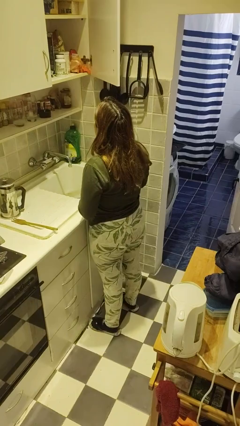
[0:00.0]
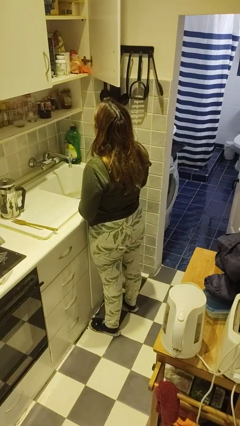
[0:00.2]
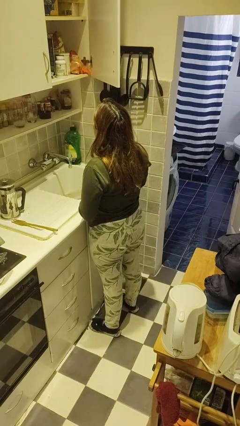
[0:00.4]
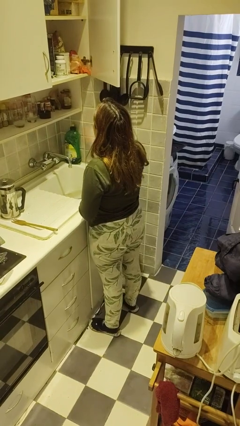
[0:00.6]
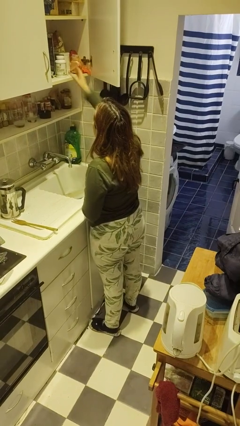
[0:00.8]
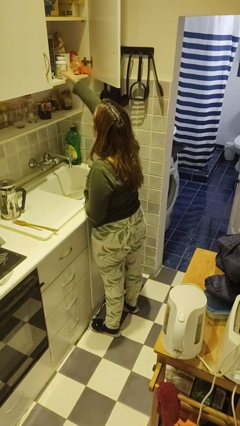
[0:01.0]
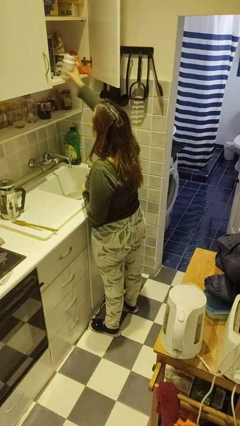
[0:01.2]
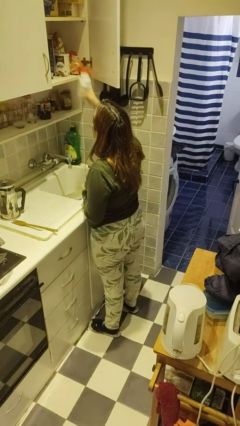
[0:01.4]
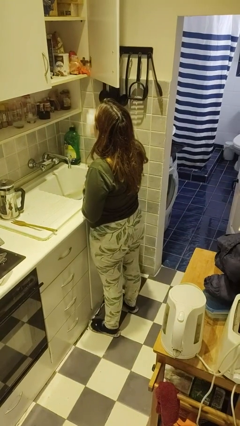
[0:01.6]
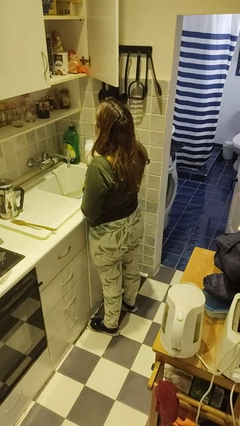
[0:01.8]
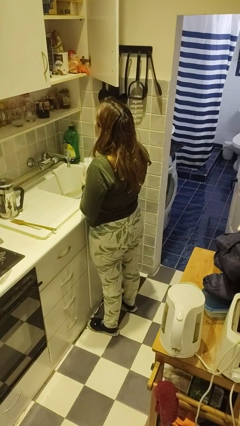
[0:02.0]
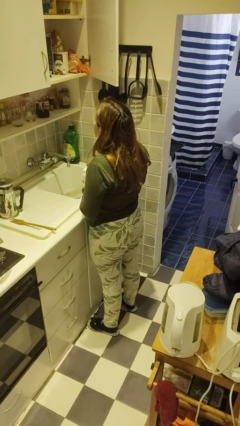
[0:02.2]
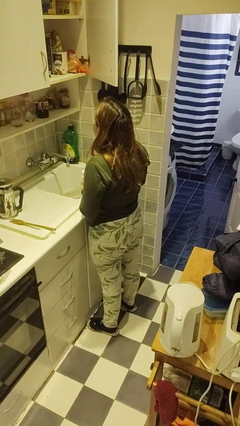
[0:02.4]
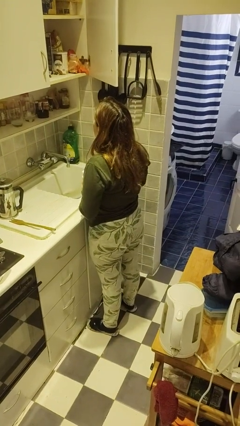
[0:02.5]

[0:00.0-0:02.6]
person takes object from cabinet

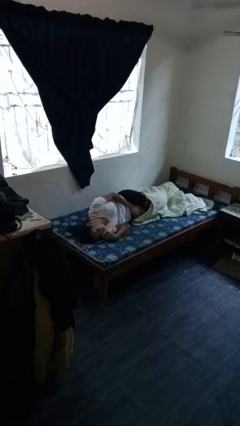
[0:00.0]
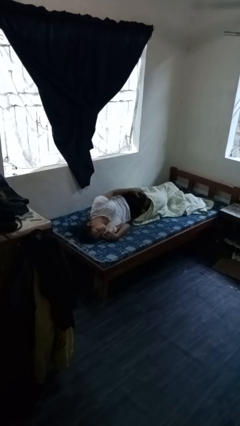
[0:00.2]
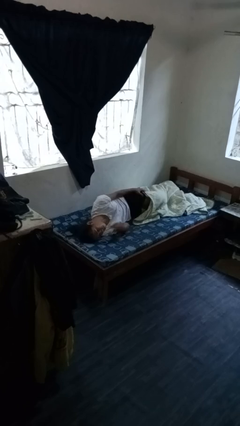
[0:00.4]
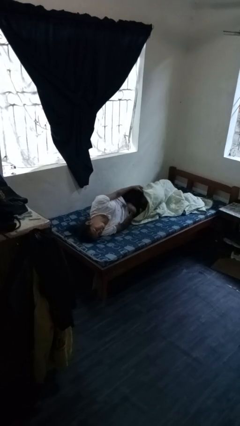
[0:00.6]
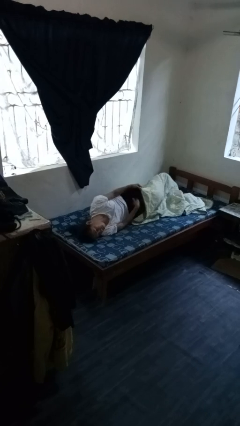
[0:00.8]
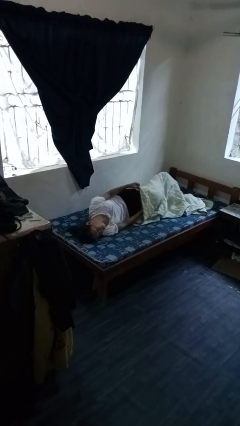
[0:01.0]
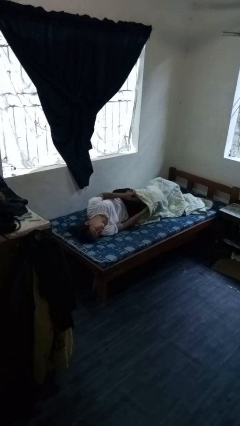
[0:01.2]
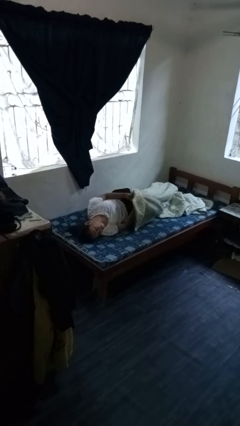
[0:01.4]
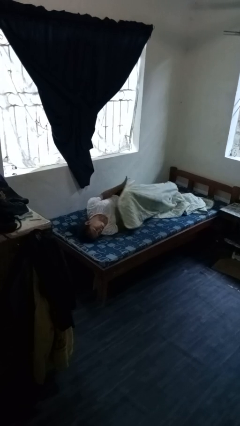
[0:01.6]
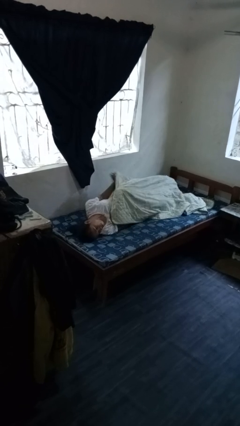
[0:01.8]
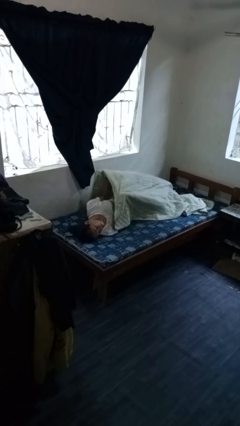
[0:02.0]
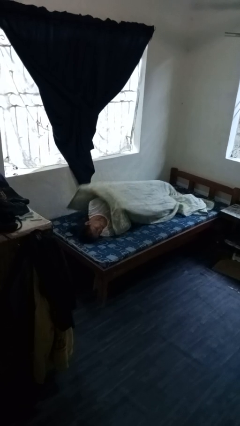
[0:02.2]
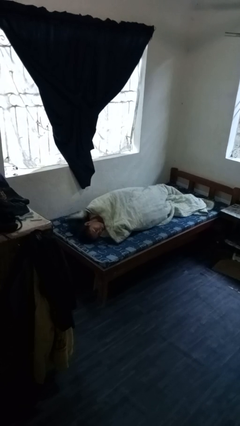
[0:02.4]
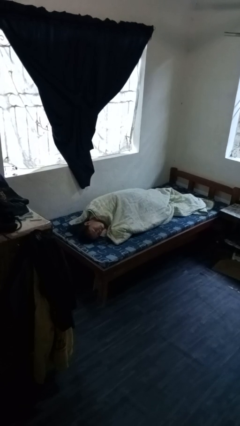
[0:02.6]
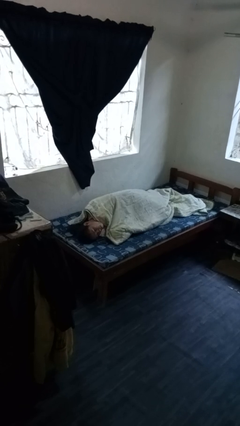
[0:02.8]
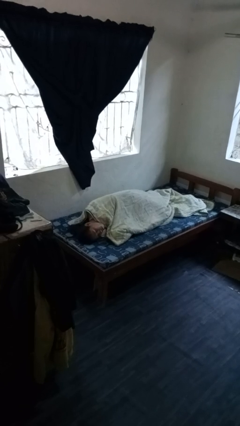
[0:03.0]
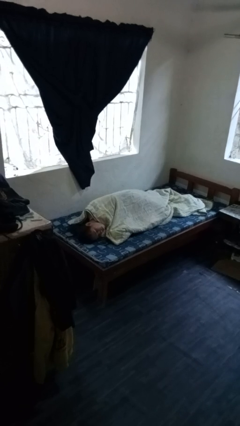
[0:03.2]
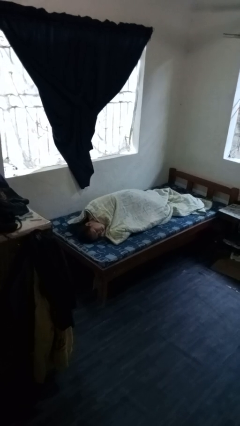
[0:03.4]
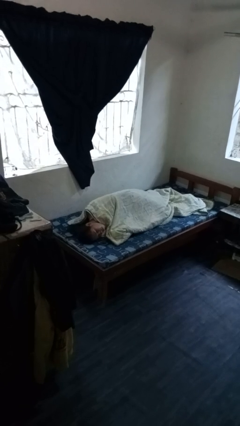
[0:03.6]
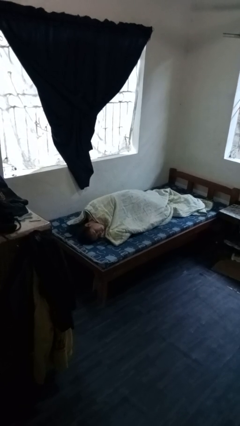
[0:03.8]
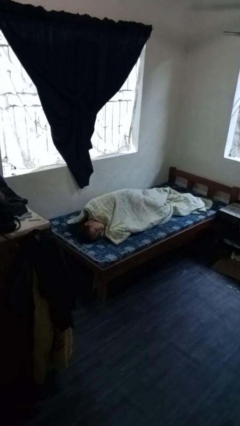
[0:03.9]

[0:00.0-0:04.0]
person covers with bedsheets

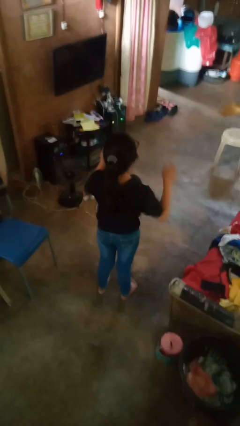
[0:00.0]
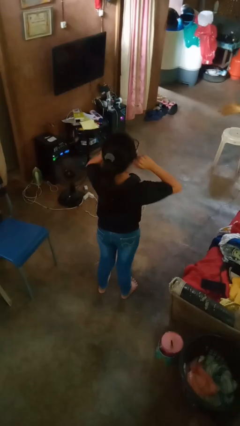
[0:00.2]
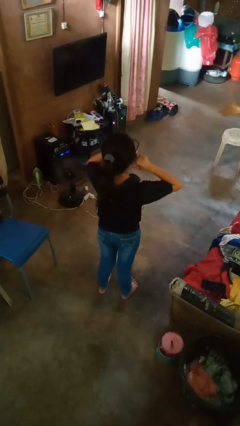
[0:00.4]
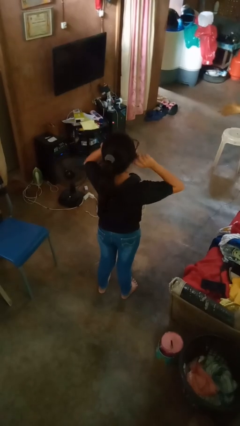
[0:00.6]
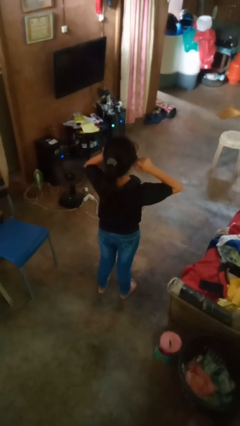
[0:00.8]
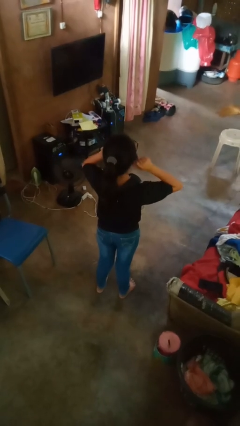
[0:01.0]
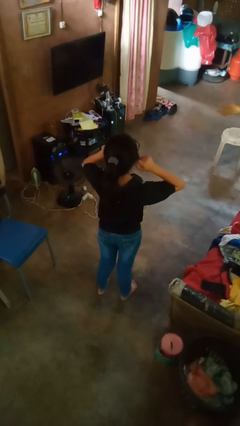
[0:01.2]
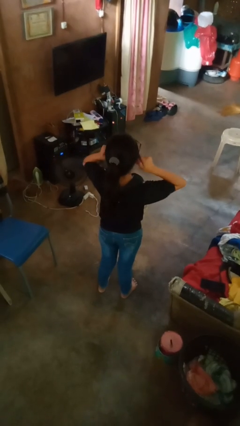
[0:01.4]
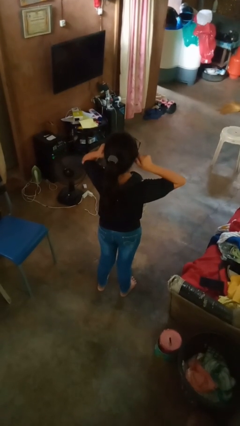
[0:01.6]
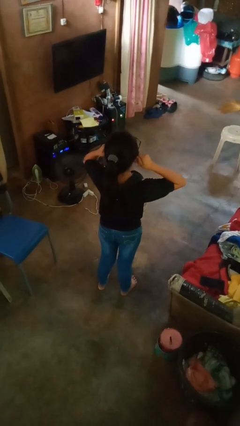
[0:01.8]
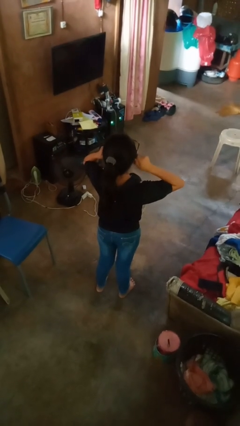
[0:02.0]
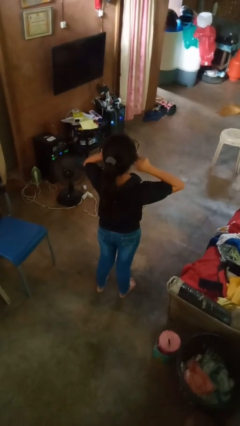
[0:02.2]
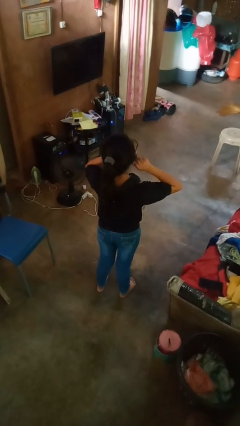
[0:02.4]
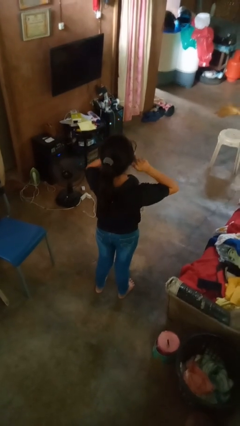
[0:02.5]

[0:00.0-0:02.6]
person touches earlobe

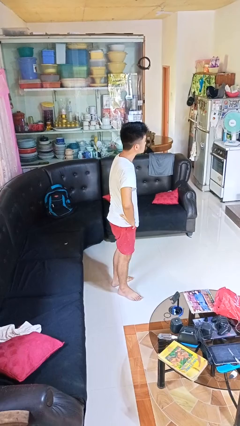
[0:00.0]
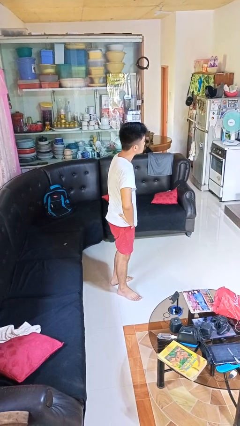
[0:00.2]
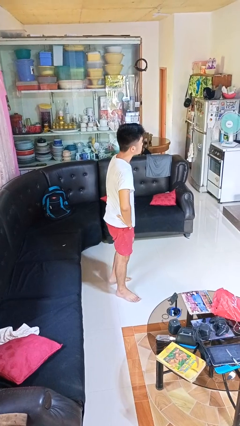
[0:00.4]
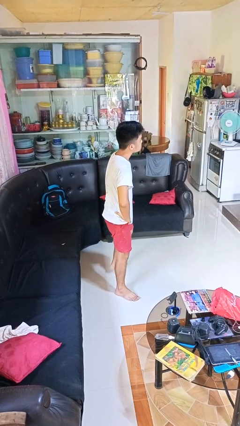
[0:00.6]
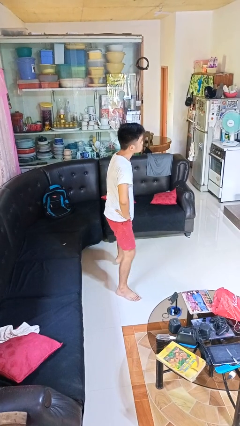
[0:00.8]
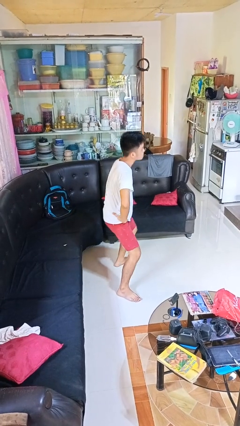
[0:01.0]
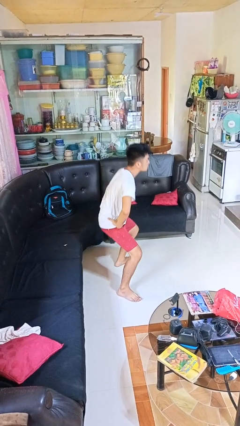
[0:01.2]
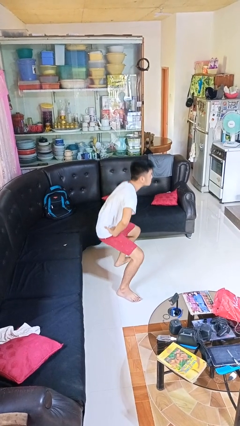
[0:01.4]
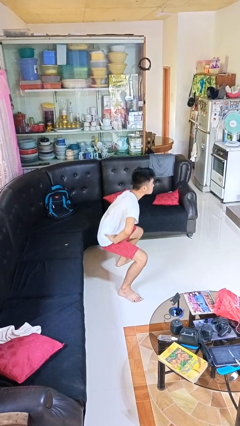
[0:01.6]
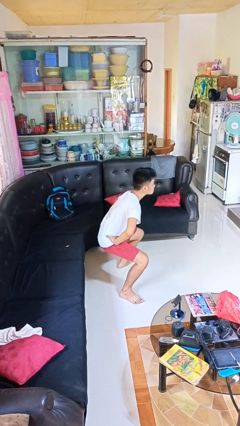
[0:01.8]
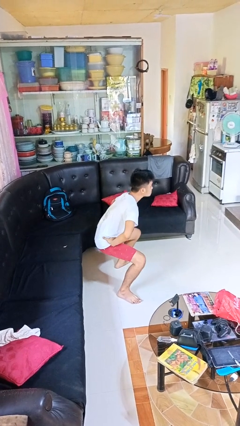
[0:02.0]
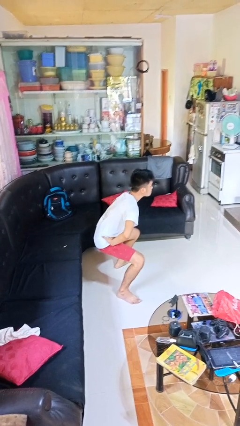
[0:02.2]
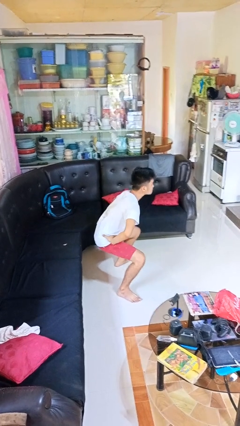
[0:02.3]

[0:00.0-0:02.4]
person squats

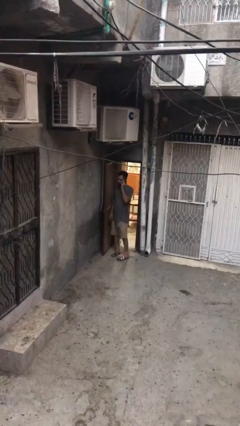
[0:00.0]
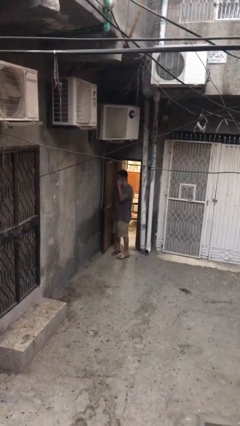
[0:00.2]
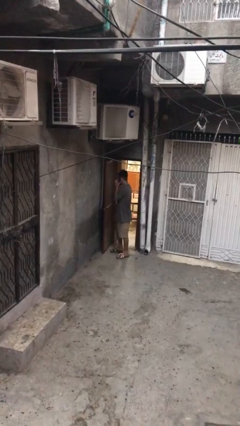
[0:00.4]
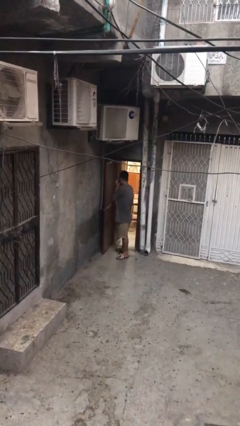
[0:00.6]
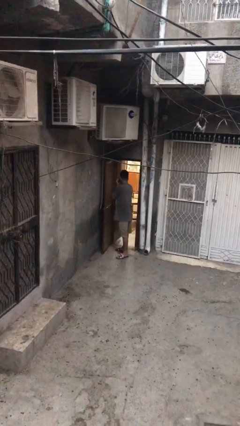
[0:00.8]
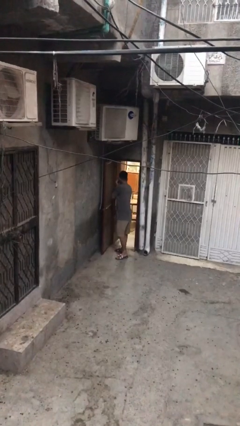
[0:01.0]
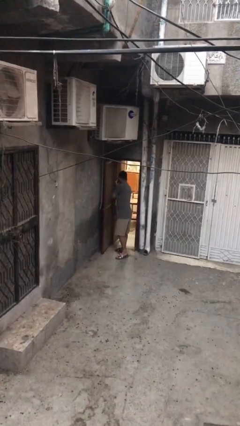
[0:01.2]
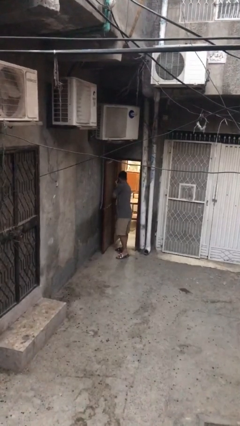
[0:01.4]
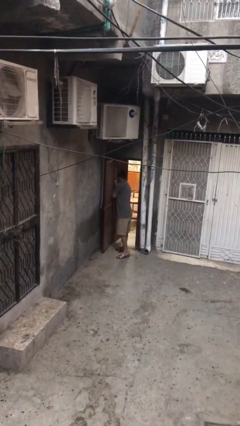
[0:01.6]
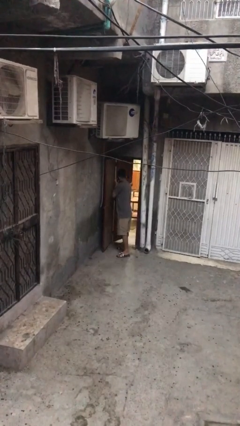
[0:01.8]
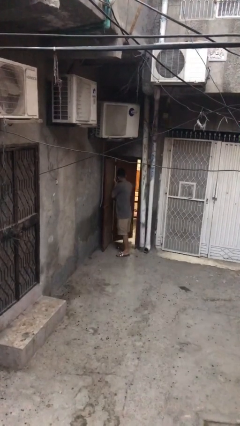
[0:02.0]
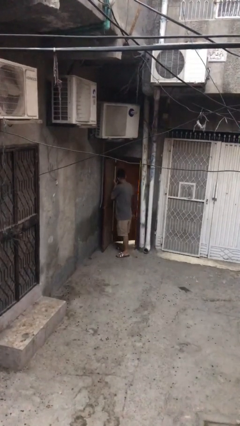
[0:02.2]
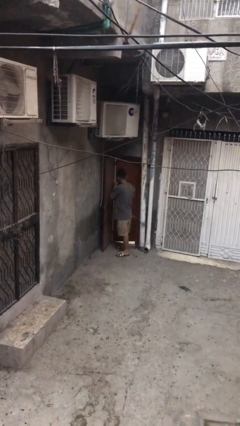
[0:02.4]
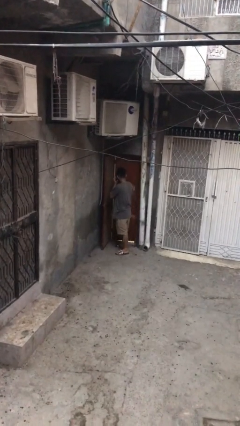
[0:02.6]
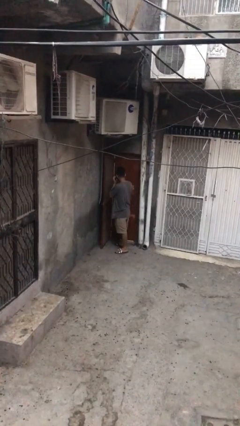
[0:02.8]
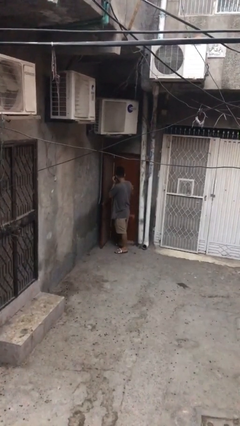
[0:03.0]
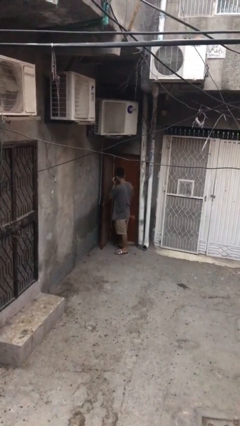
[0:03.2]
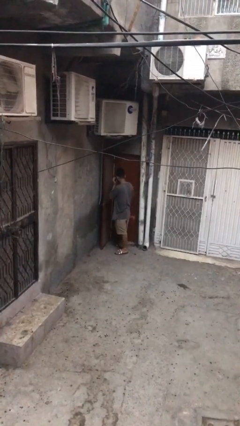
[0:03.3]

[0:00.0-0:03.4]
person closes facility door

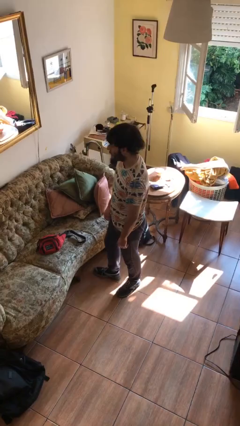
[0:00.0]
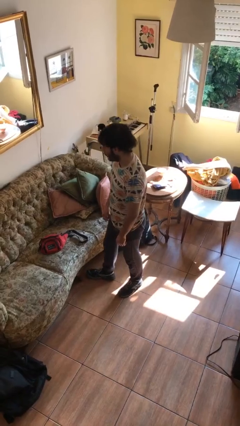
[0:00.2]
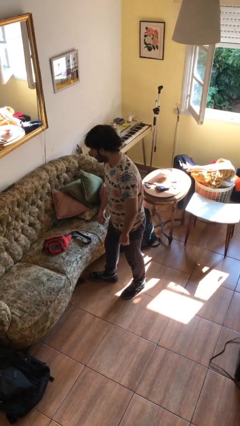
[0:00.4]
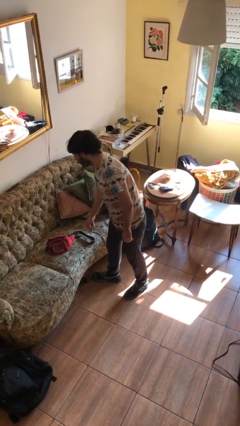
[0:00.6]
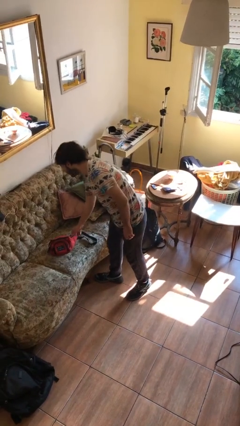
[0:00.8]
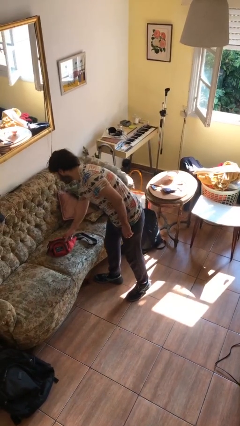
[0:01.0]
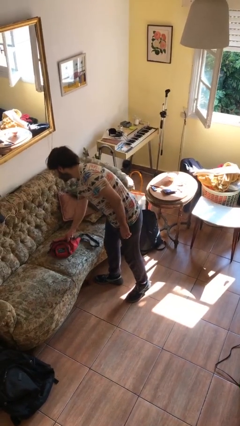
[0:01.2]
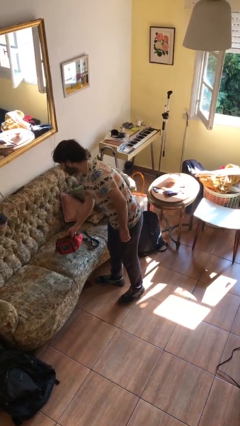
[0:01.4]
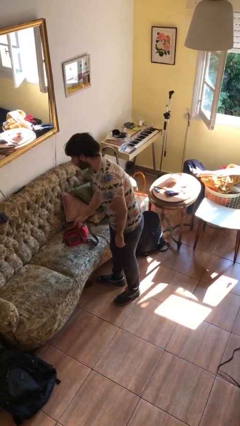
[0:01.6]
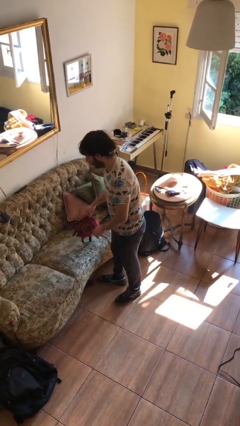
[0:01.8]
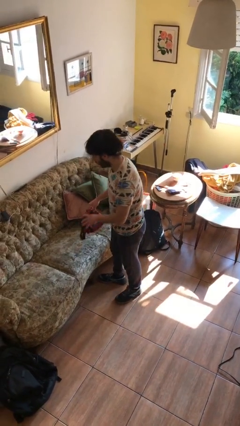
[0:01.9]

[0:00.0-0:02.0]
person picks up object from couch
